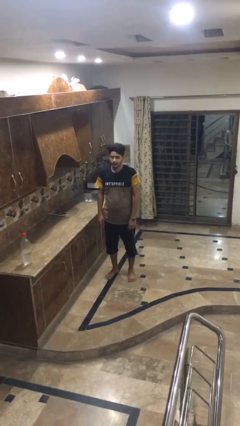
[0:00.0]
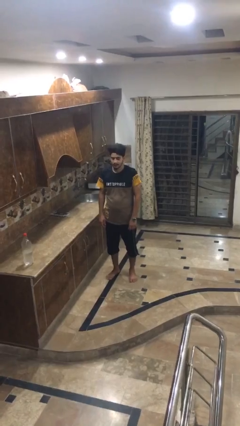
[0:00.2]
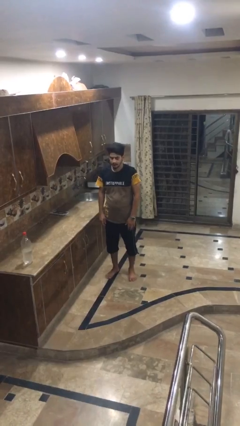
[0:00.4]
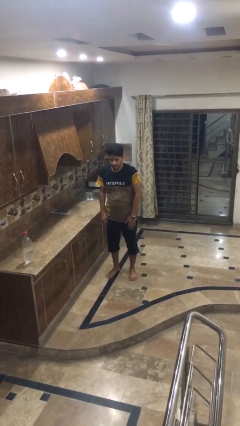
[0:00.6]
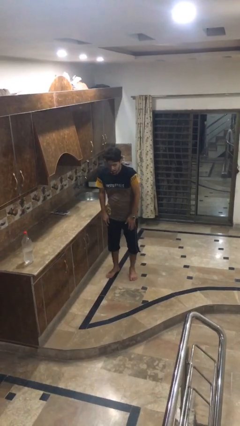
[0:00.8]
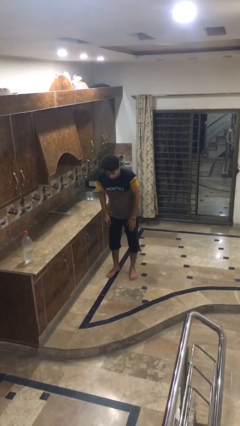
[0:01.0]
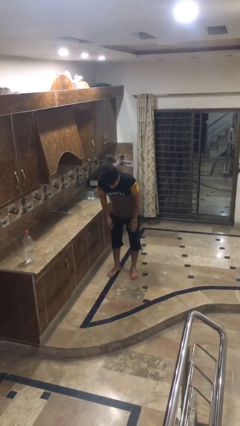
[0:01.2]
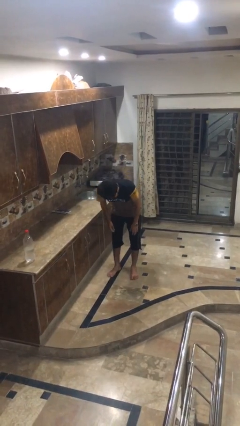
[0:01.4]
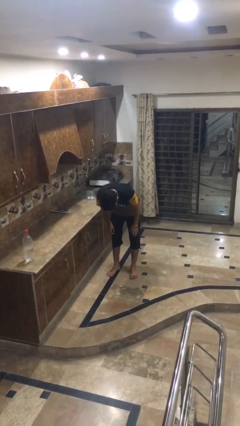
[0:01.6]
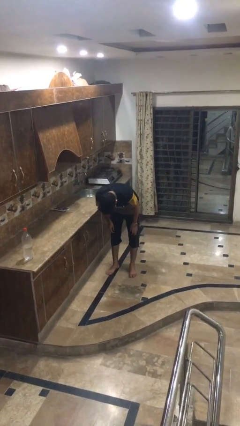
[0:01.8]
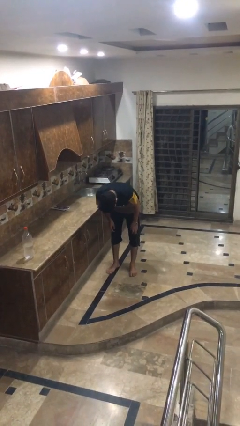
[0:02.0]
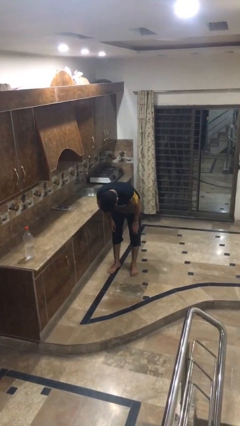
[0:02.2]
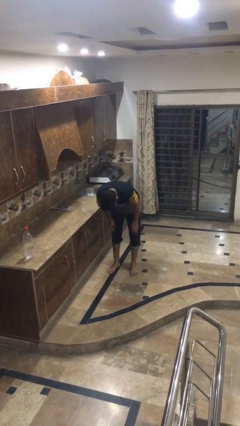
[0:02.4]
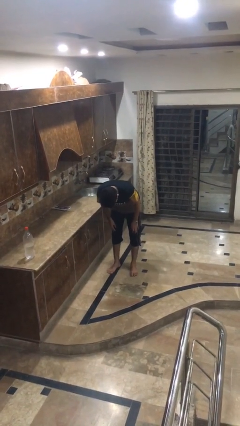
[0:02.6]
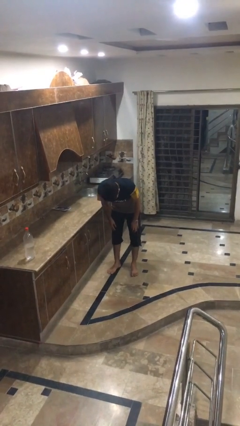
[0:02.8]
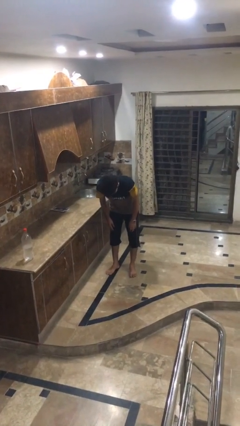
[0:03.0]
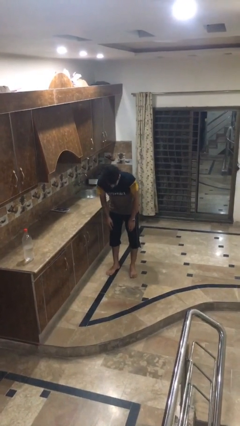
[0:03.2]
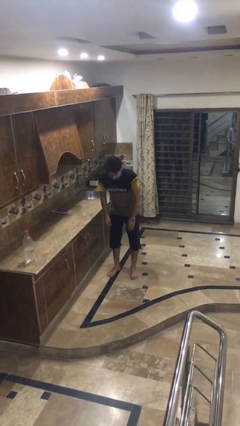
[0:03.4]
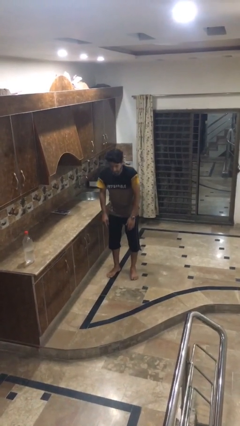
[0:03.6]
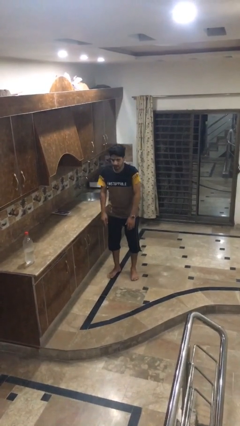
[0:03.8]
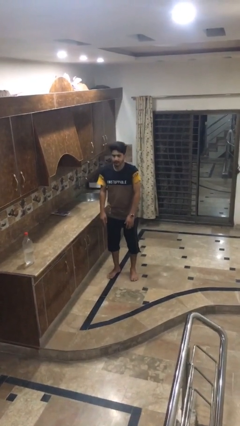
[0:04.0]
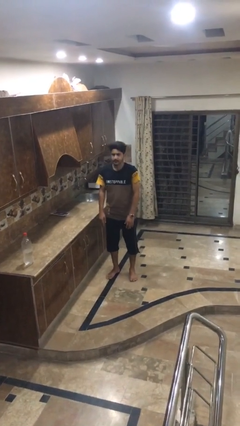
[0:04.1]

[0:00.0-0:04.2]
person bows

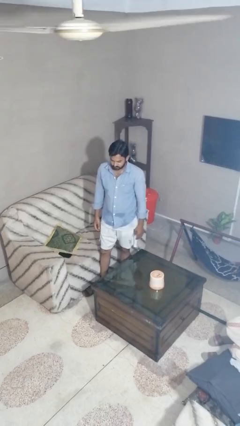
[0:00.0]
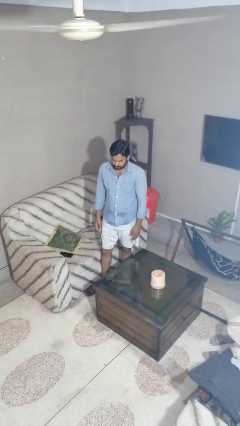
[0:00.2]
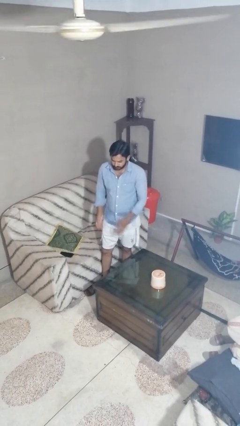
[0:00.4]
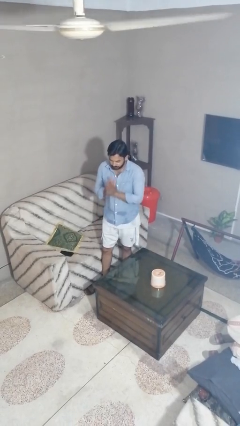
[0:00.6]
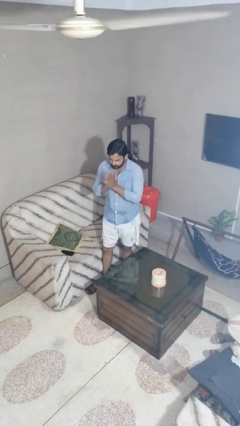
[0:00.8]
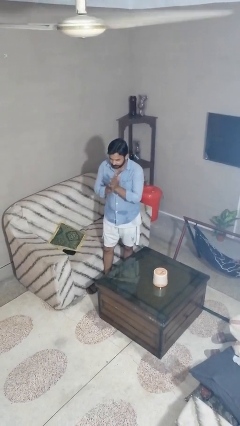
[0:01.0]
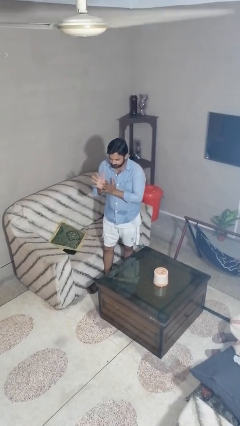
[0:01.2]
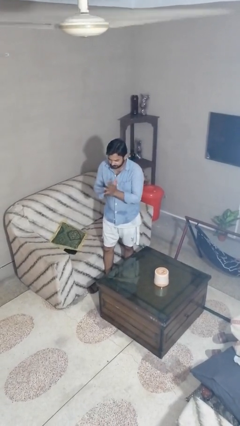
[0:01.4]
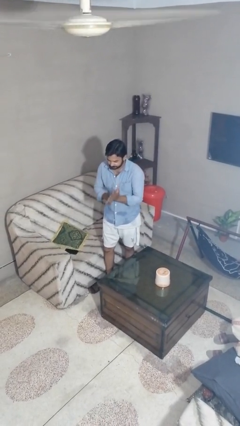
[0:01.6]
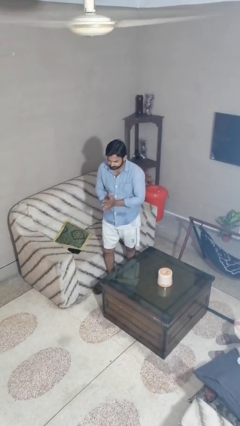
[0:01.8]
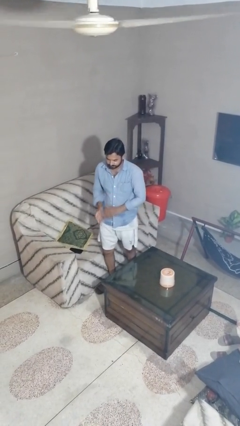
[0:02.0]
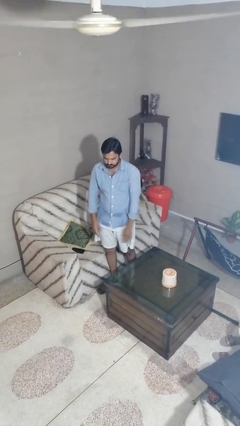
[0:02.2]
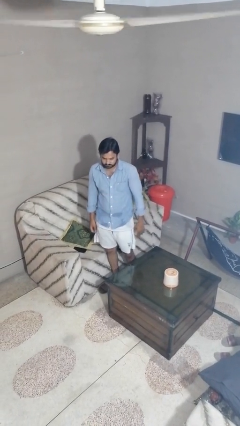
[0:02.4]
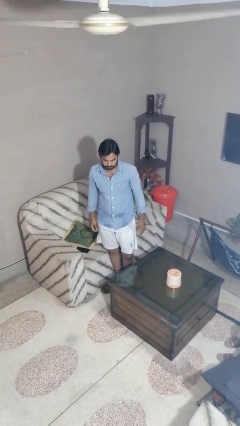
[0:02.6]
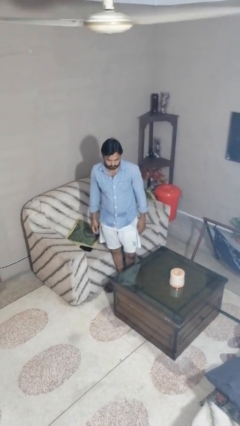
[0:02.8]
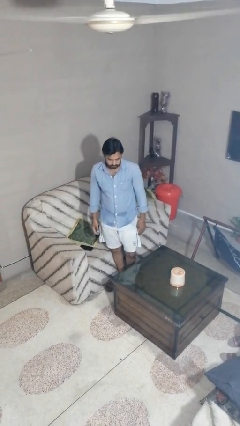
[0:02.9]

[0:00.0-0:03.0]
person blows into hands

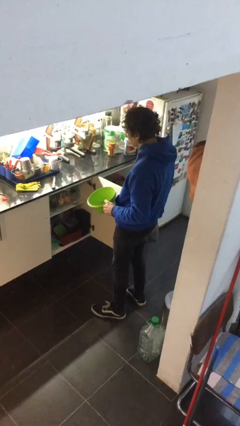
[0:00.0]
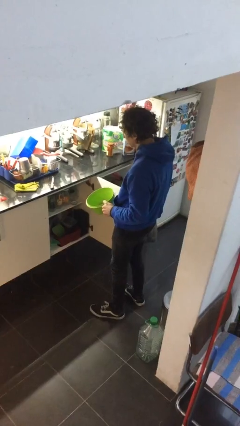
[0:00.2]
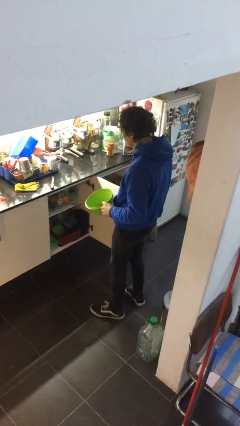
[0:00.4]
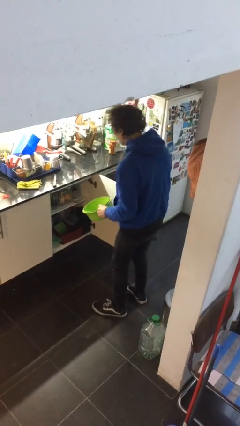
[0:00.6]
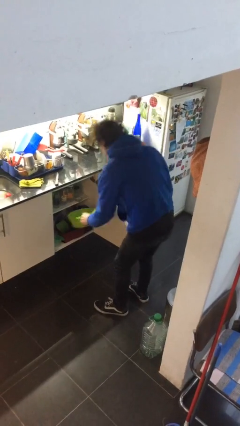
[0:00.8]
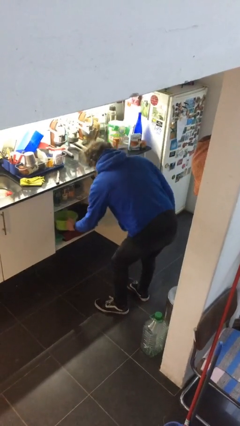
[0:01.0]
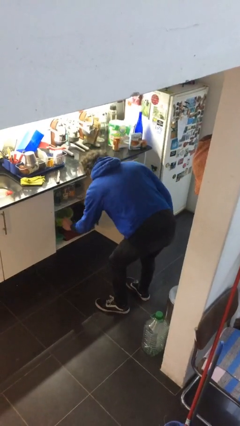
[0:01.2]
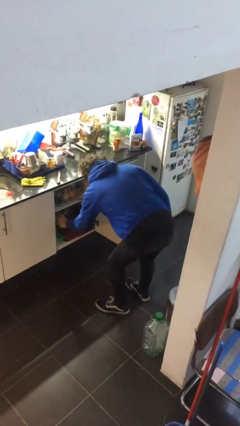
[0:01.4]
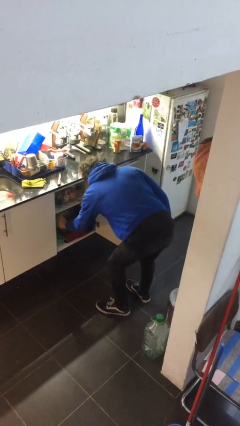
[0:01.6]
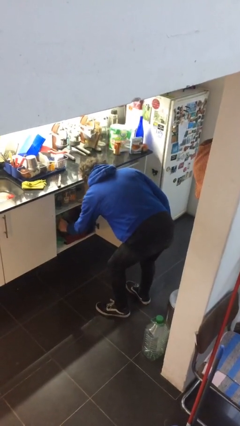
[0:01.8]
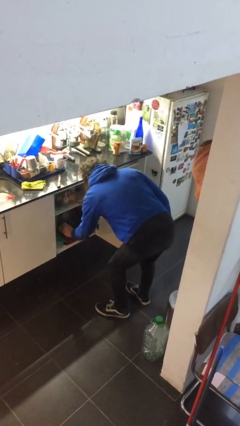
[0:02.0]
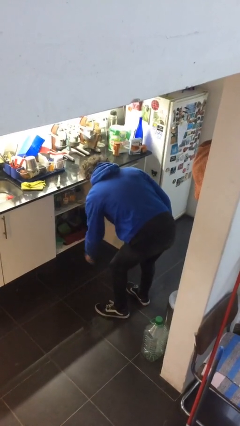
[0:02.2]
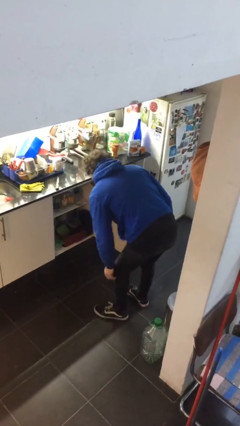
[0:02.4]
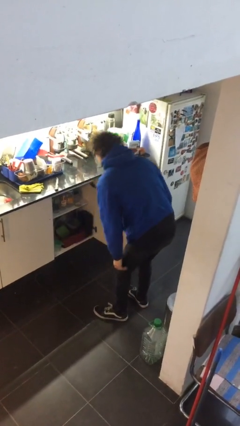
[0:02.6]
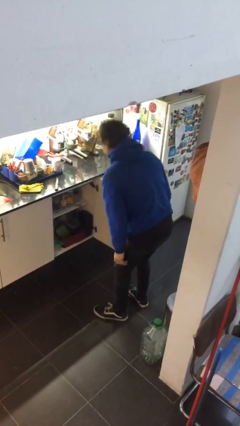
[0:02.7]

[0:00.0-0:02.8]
person puts down object into cabinet

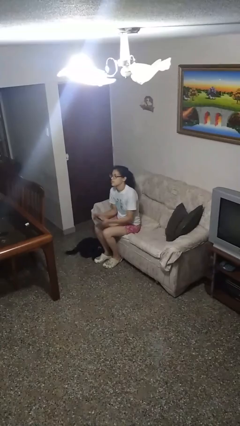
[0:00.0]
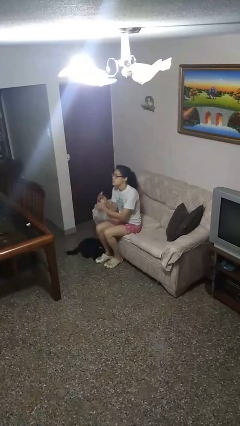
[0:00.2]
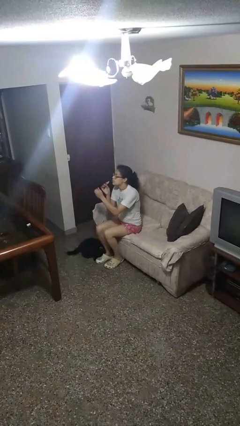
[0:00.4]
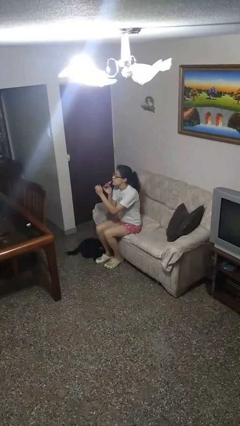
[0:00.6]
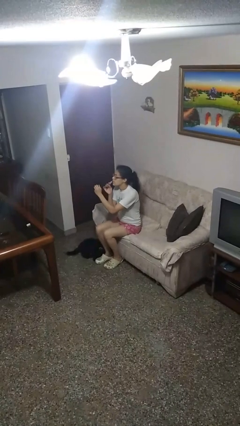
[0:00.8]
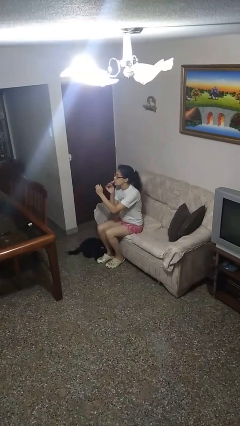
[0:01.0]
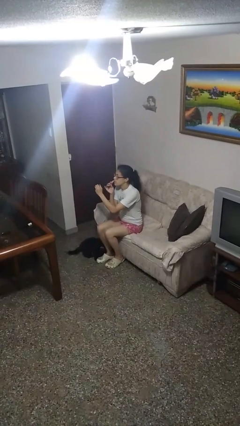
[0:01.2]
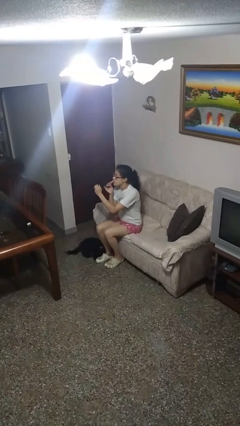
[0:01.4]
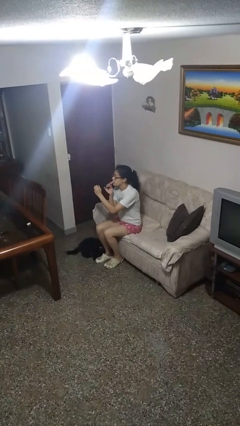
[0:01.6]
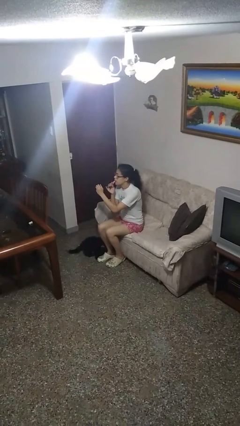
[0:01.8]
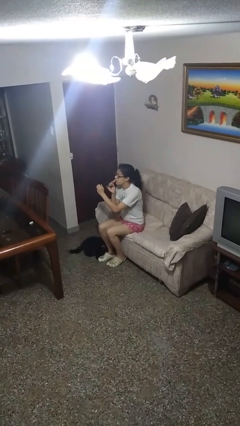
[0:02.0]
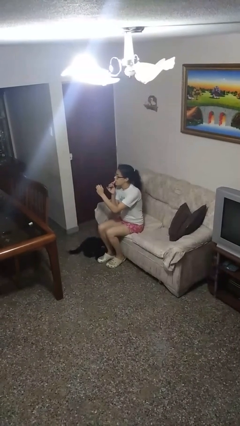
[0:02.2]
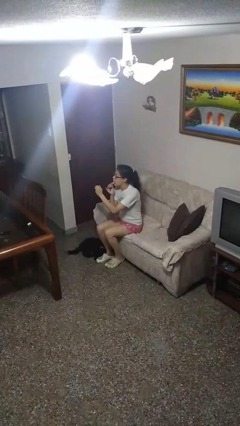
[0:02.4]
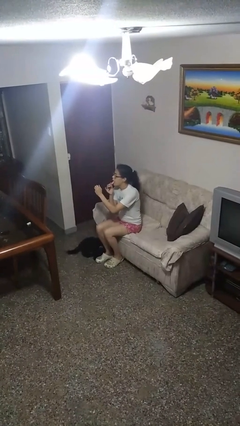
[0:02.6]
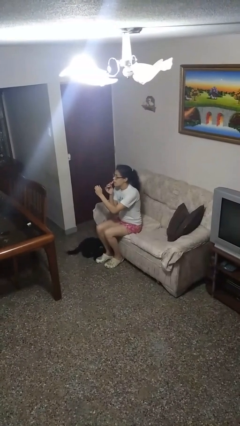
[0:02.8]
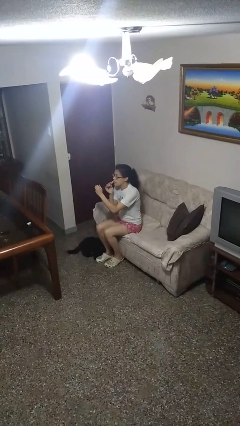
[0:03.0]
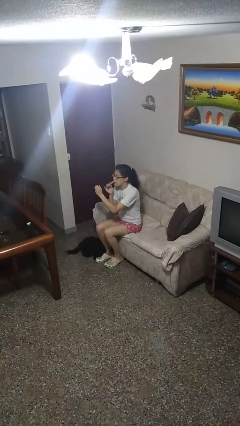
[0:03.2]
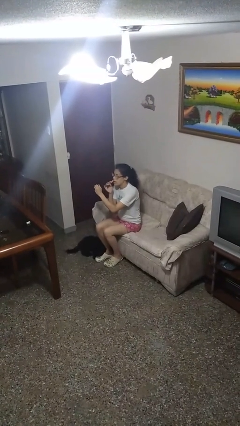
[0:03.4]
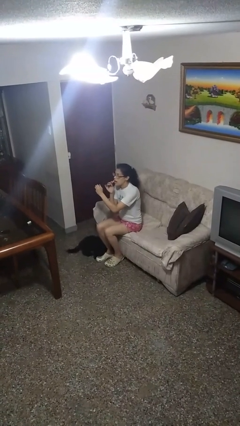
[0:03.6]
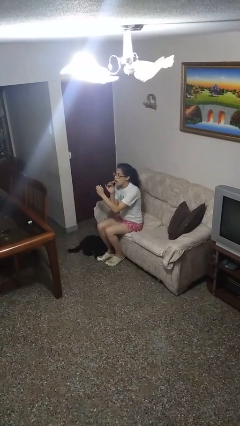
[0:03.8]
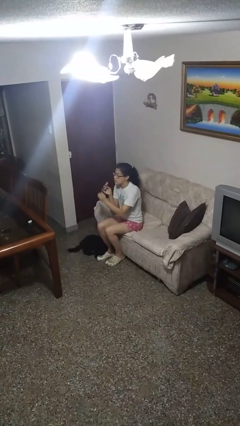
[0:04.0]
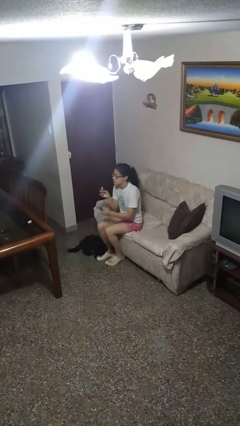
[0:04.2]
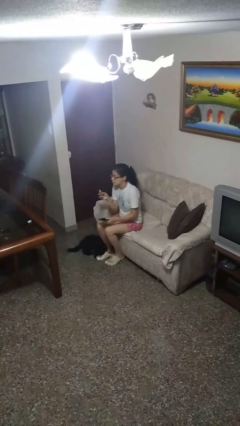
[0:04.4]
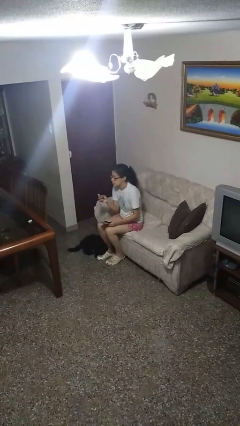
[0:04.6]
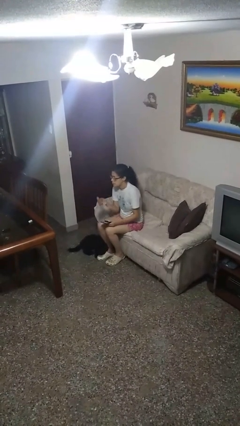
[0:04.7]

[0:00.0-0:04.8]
person applies lip makeup

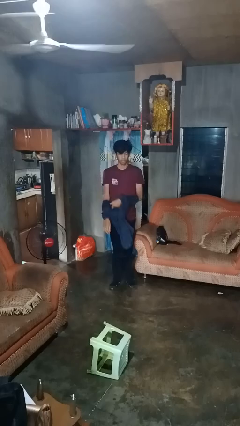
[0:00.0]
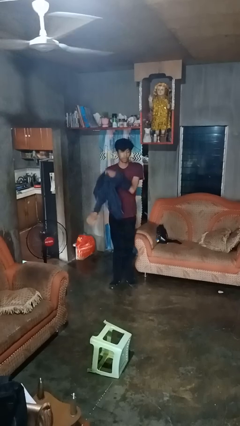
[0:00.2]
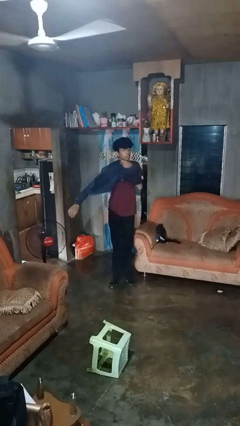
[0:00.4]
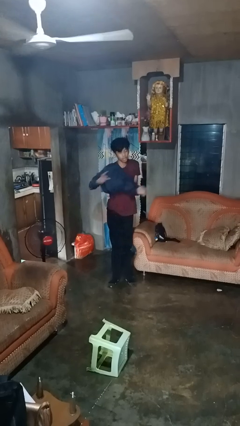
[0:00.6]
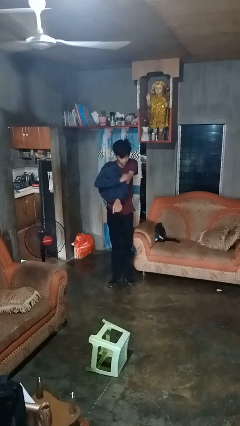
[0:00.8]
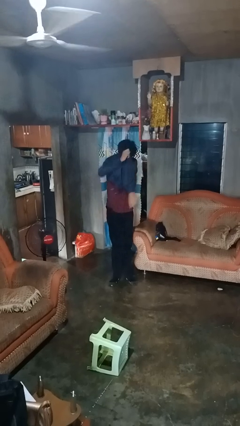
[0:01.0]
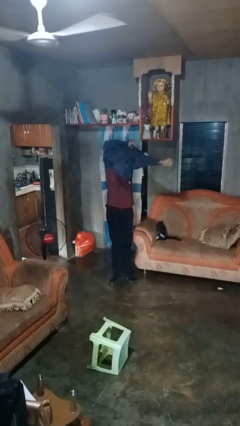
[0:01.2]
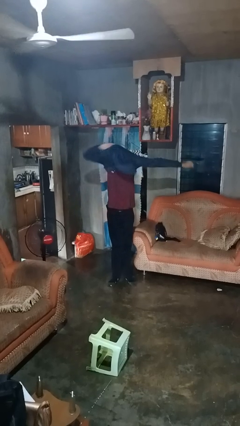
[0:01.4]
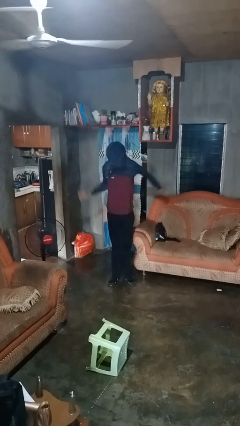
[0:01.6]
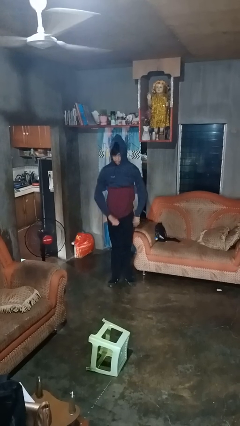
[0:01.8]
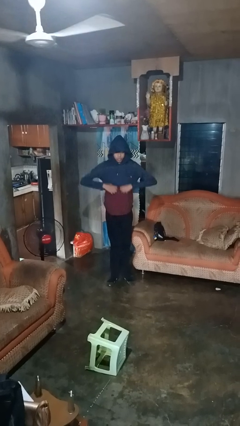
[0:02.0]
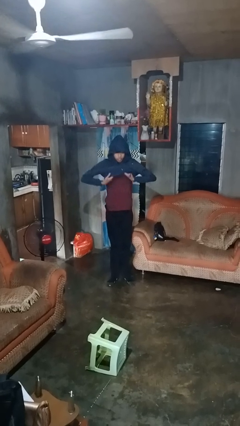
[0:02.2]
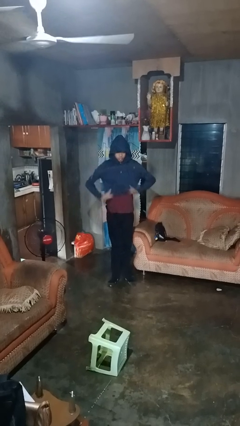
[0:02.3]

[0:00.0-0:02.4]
person puts on hoodie
